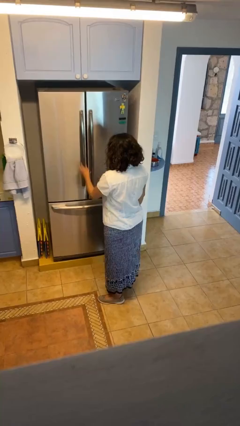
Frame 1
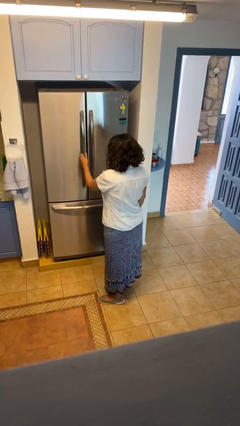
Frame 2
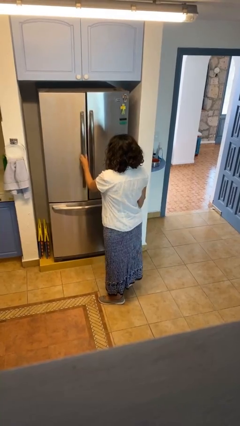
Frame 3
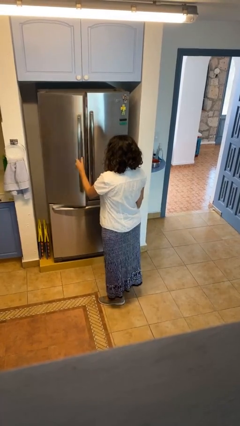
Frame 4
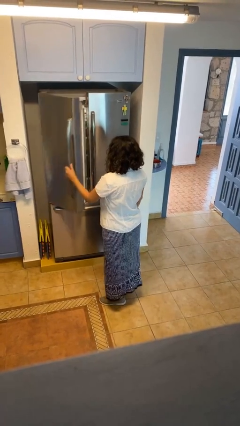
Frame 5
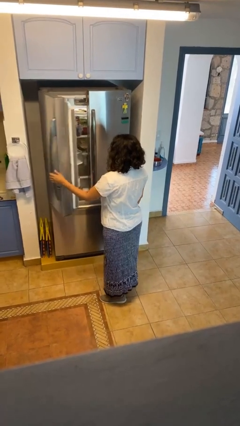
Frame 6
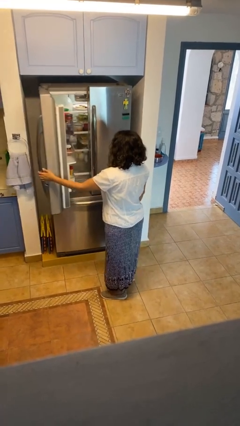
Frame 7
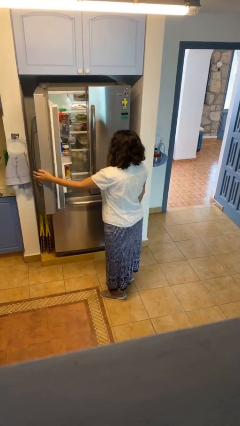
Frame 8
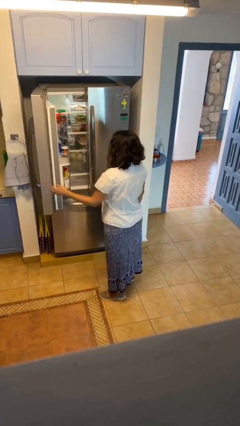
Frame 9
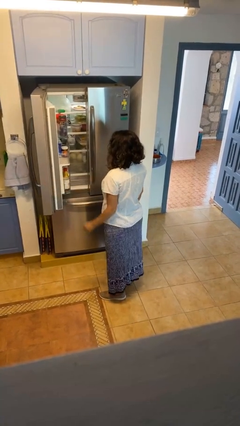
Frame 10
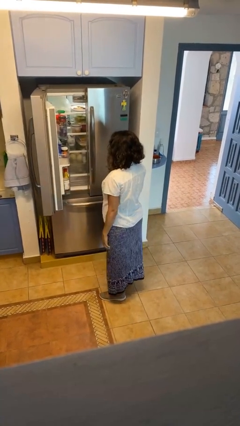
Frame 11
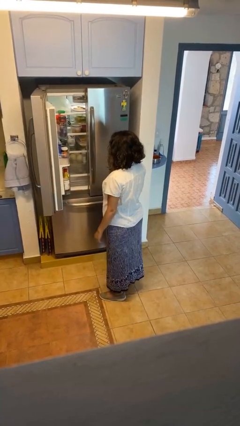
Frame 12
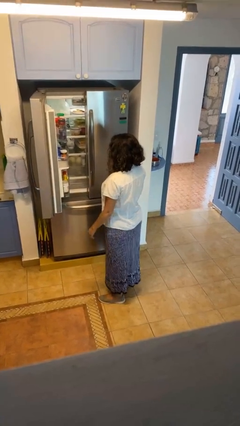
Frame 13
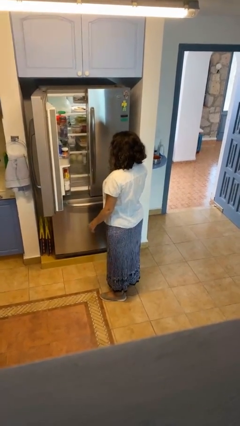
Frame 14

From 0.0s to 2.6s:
person opens refrigerator

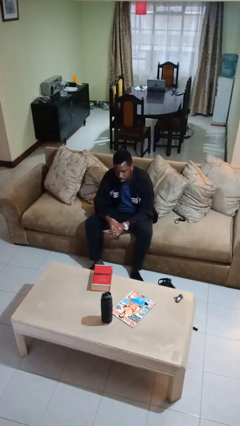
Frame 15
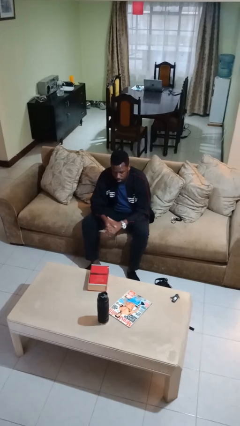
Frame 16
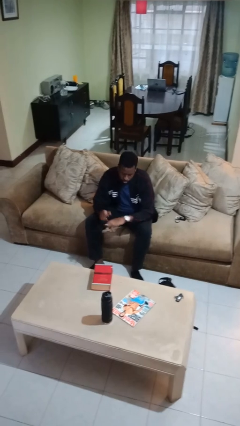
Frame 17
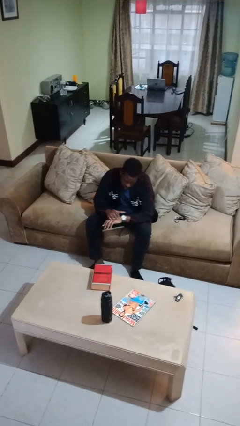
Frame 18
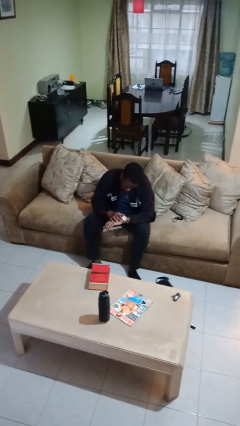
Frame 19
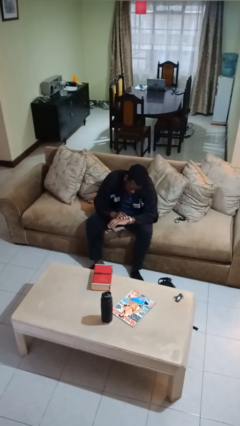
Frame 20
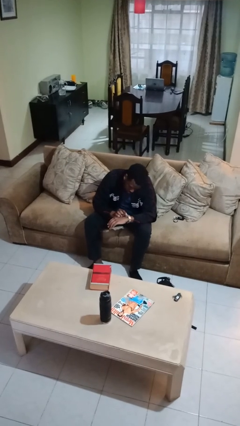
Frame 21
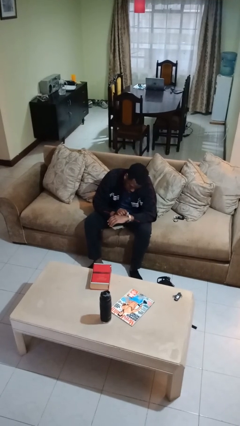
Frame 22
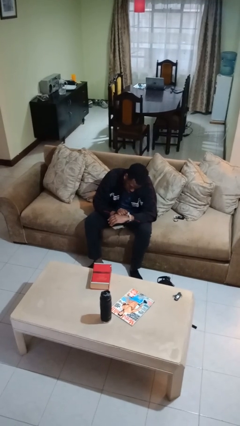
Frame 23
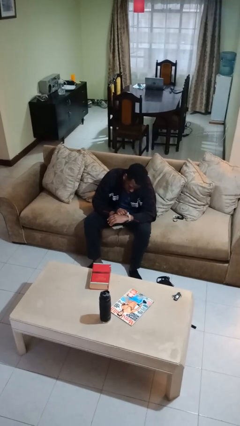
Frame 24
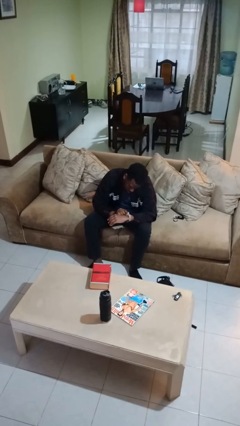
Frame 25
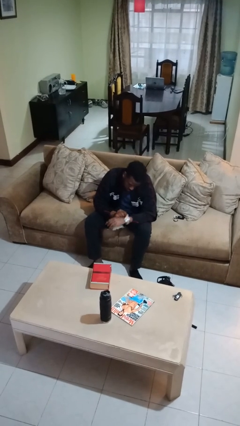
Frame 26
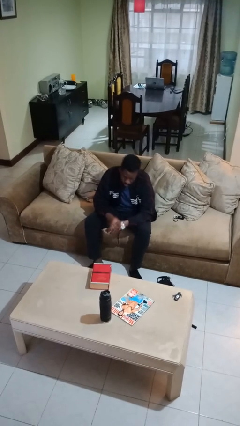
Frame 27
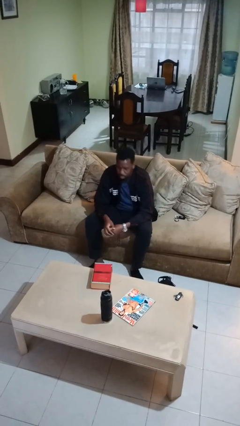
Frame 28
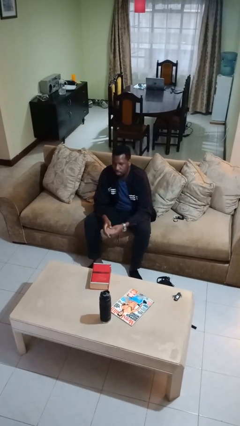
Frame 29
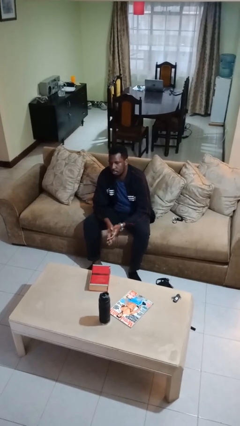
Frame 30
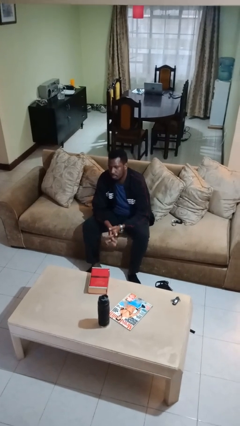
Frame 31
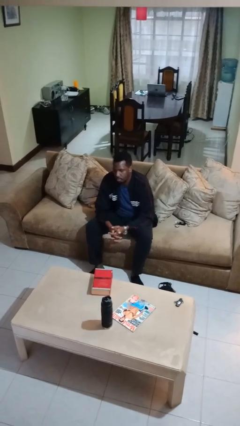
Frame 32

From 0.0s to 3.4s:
person looks at wristwatch

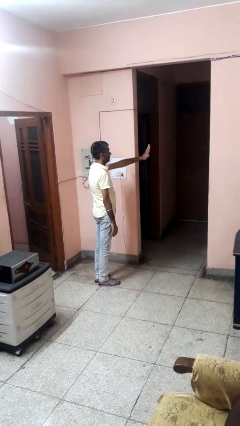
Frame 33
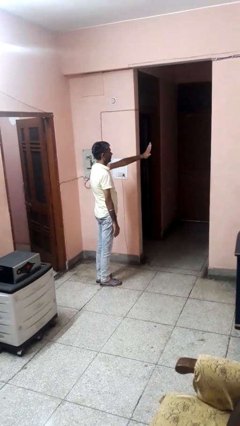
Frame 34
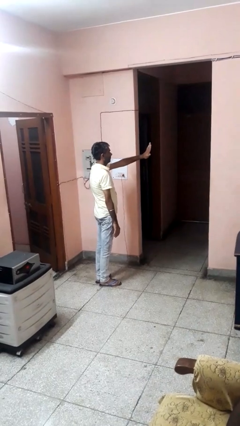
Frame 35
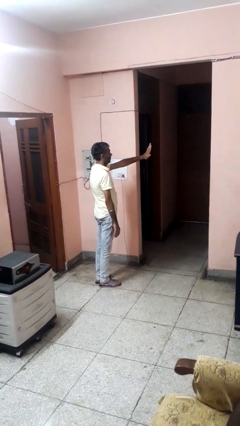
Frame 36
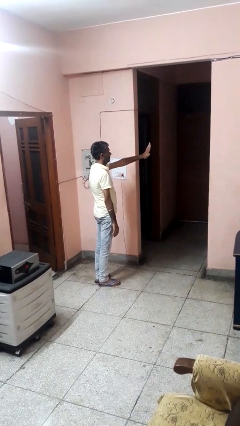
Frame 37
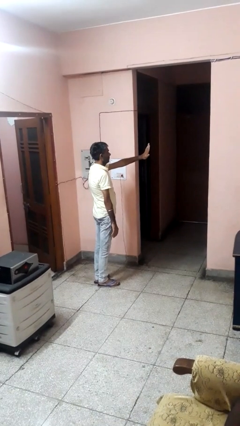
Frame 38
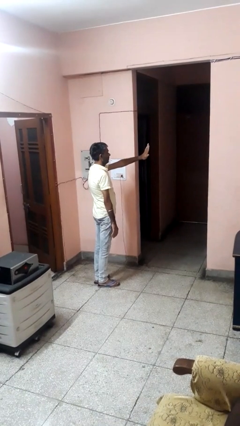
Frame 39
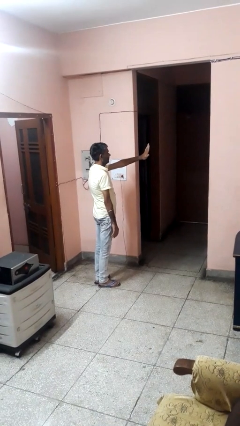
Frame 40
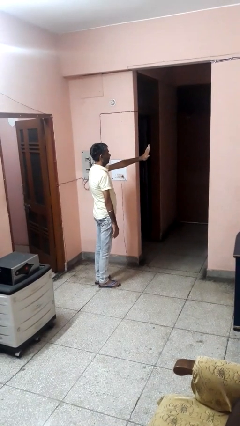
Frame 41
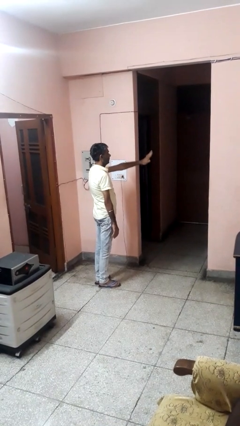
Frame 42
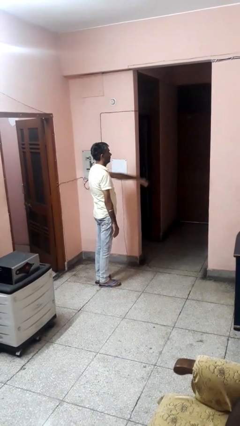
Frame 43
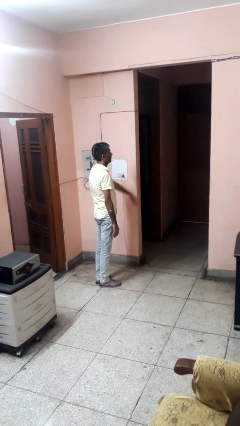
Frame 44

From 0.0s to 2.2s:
person gestures stop

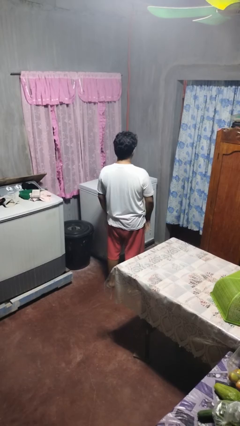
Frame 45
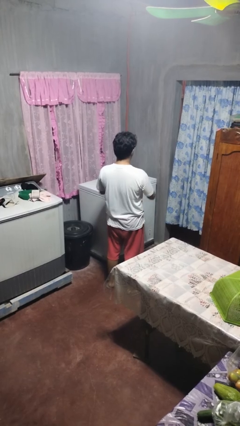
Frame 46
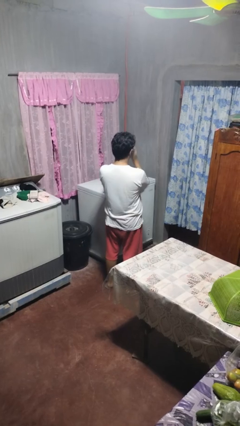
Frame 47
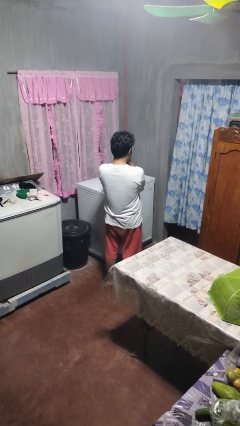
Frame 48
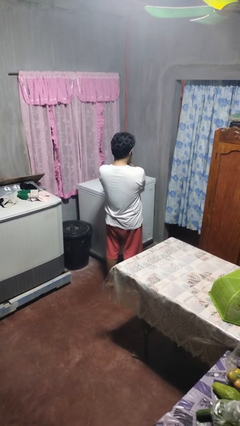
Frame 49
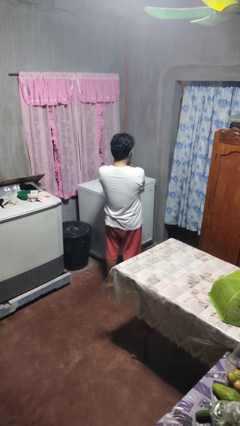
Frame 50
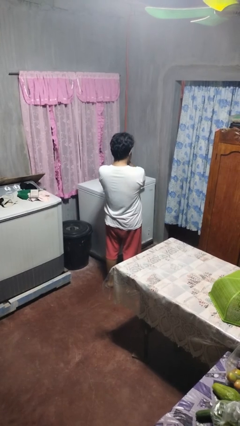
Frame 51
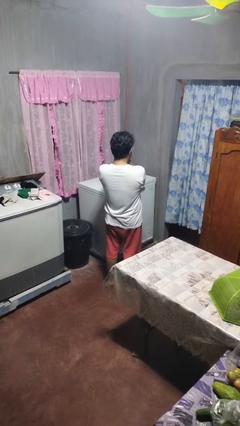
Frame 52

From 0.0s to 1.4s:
person covers face with hands

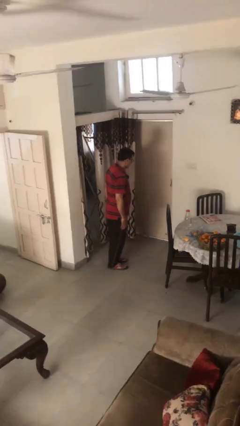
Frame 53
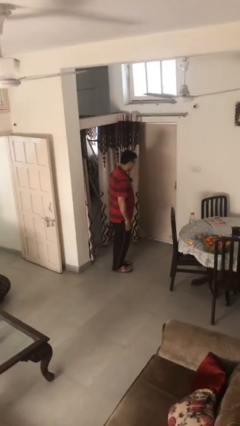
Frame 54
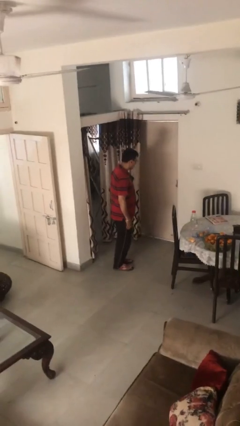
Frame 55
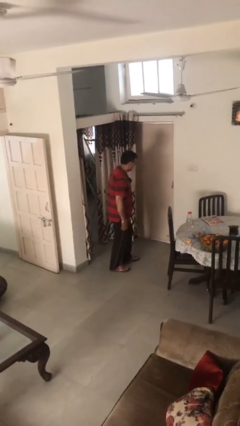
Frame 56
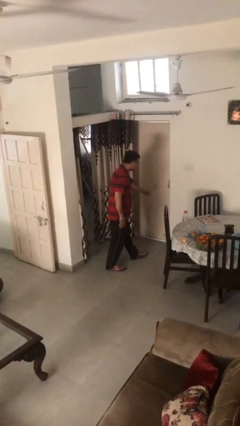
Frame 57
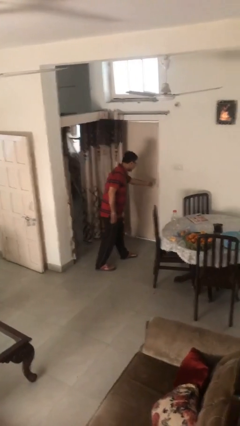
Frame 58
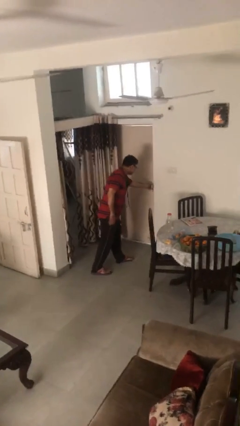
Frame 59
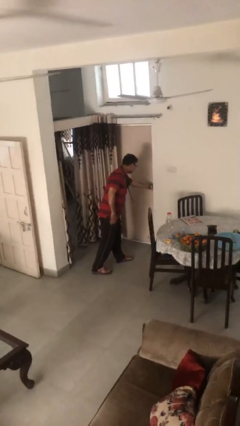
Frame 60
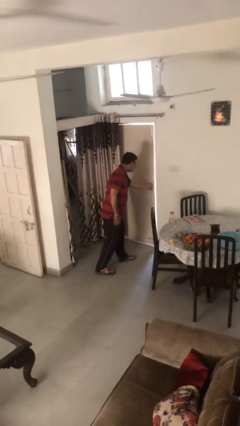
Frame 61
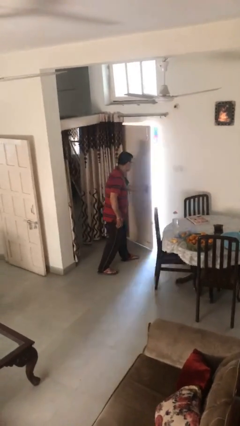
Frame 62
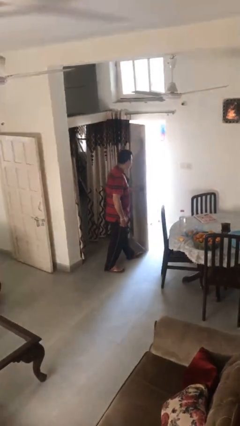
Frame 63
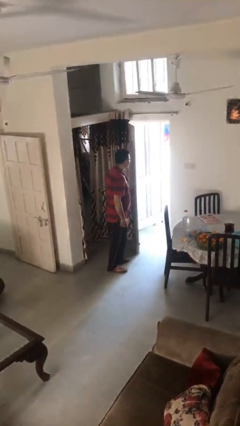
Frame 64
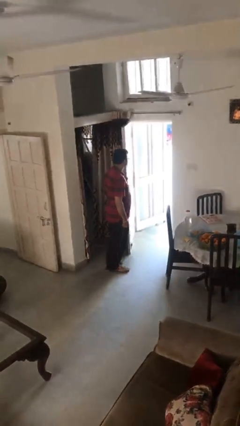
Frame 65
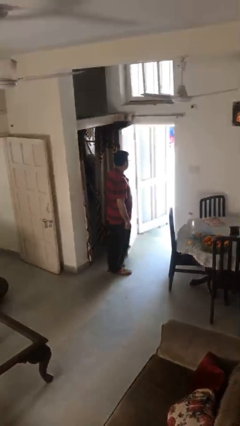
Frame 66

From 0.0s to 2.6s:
person opens facility door

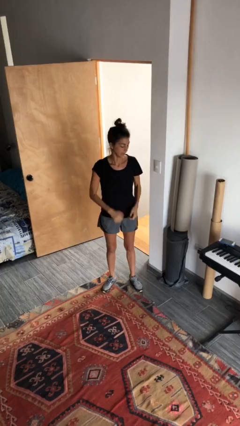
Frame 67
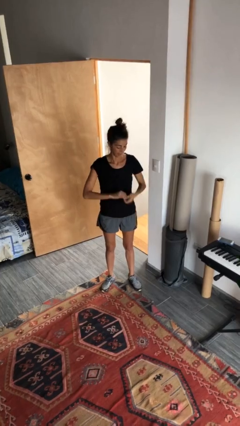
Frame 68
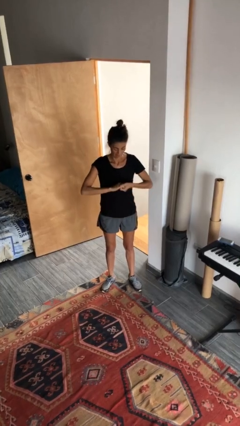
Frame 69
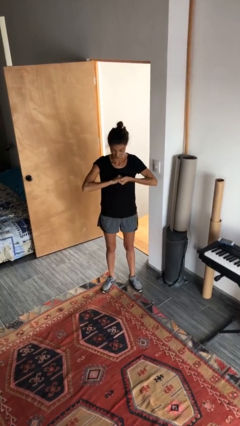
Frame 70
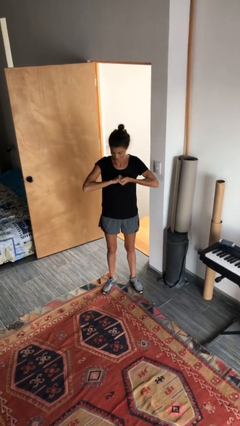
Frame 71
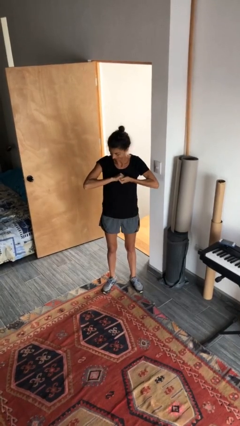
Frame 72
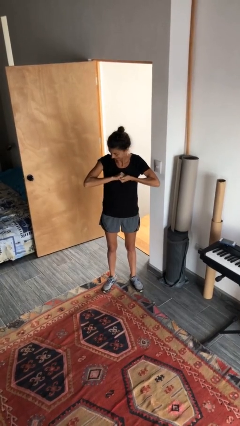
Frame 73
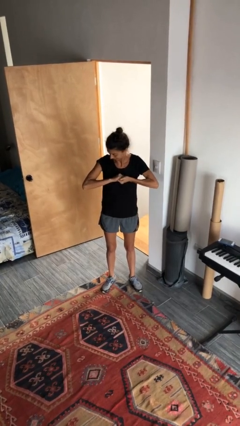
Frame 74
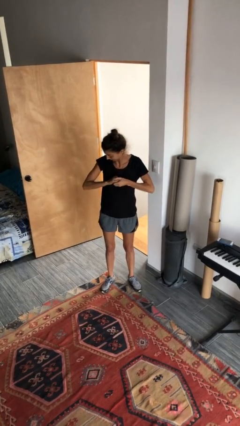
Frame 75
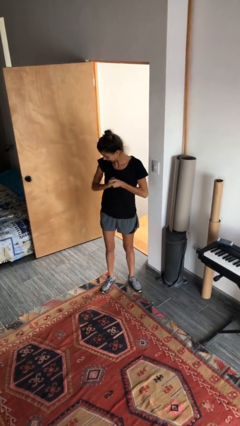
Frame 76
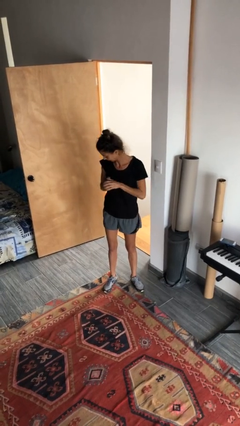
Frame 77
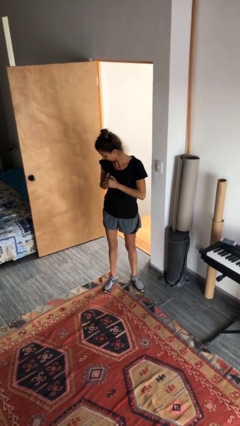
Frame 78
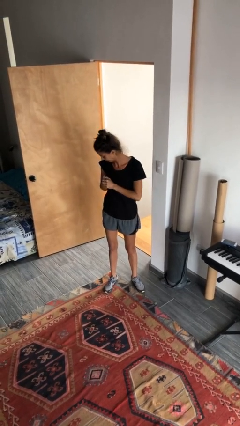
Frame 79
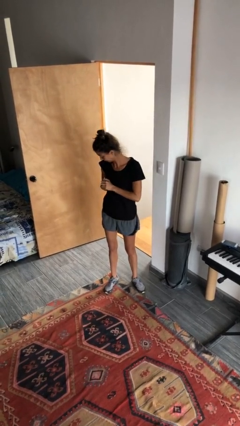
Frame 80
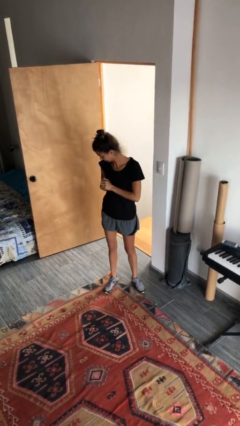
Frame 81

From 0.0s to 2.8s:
person cracks knuckles

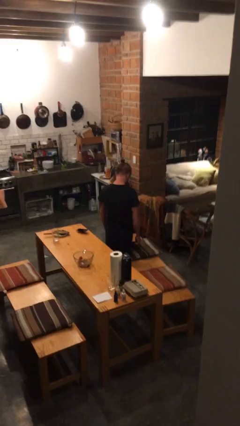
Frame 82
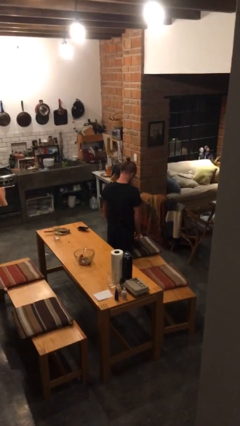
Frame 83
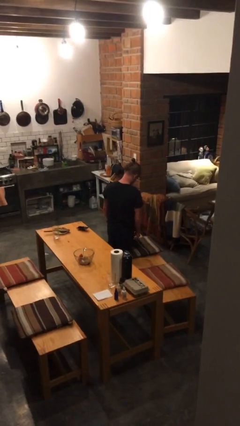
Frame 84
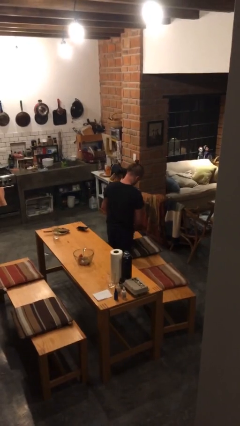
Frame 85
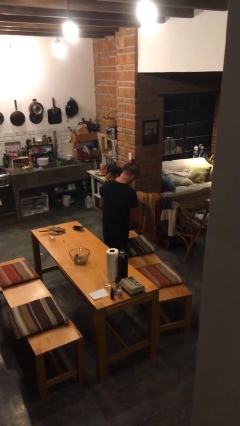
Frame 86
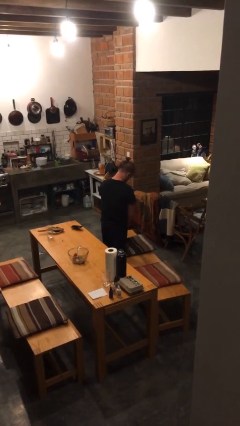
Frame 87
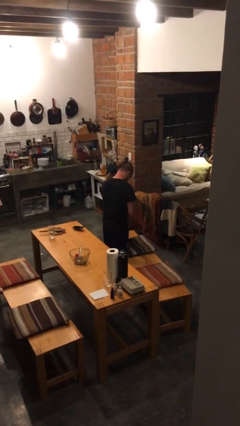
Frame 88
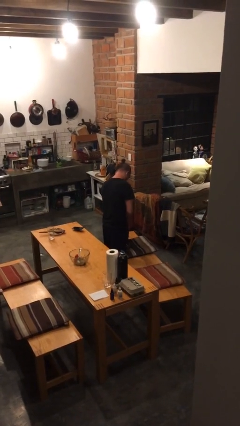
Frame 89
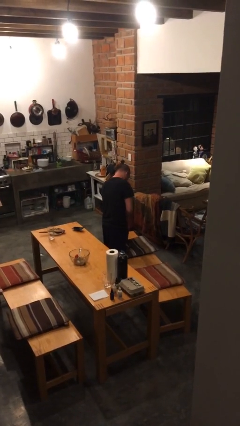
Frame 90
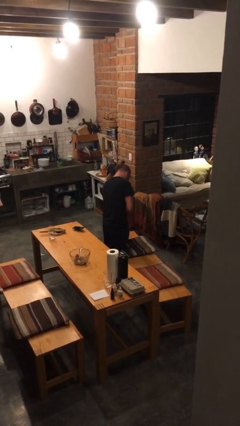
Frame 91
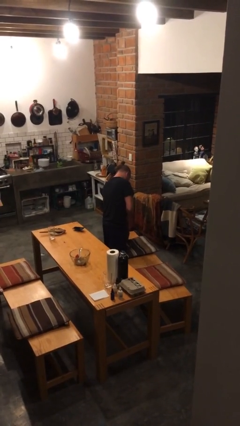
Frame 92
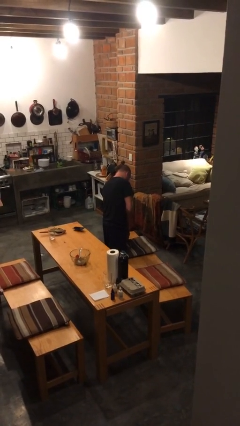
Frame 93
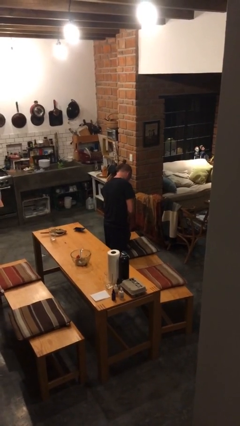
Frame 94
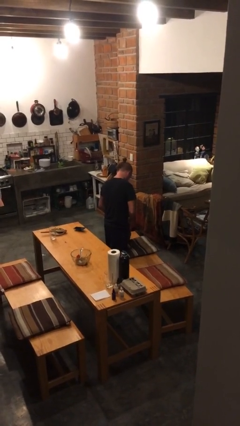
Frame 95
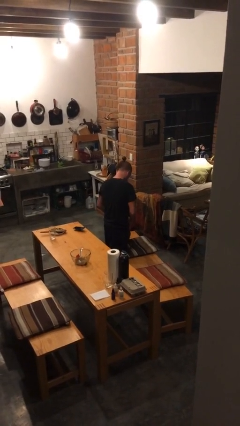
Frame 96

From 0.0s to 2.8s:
person searches in bag
